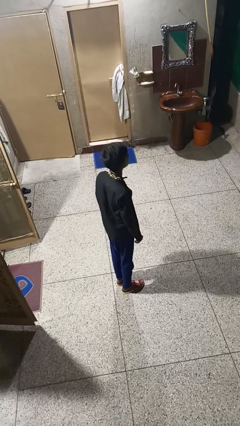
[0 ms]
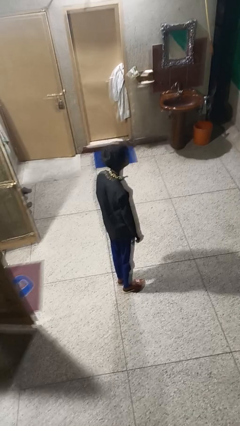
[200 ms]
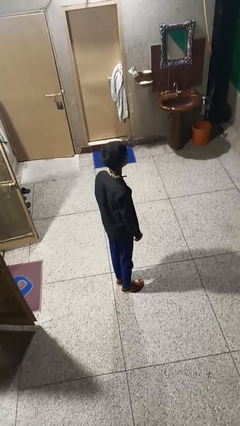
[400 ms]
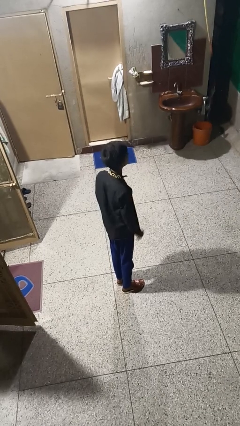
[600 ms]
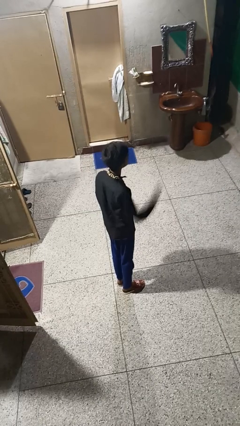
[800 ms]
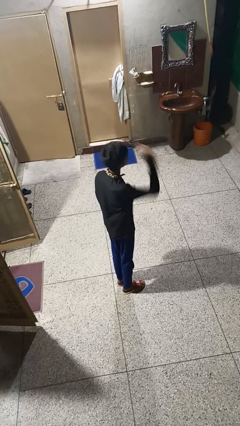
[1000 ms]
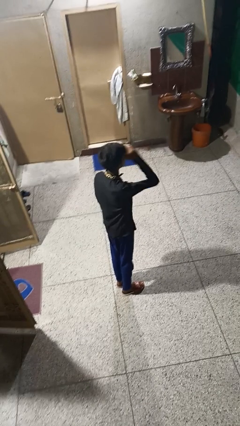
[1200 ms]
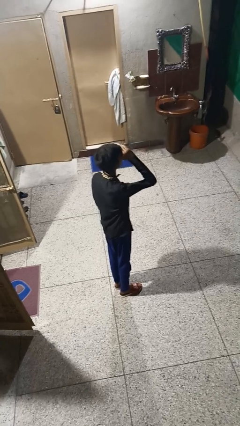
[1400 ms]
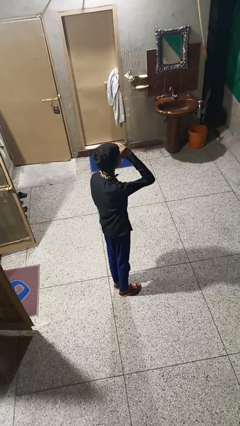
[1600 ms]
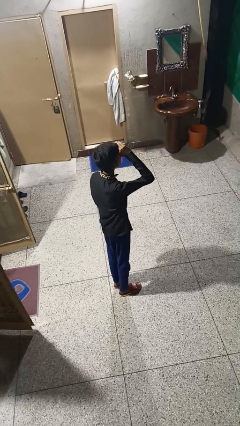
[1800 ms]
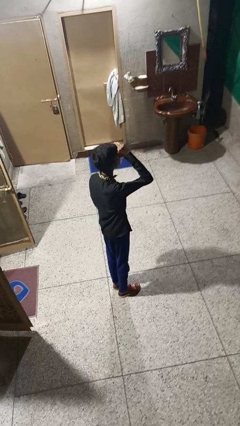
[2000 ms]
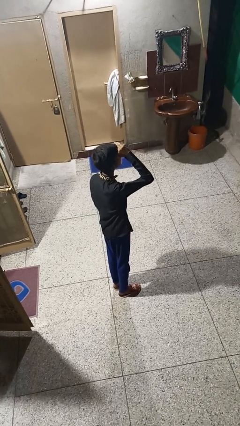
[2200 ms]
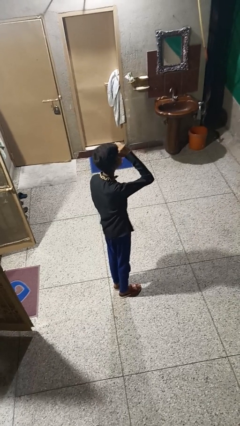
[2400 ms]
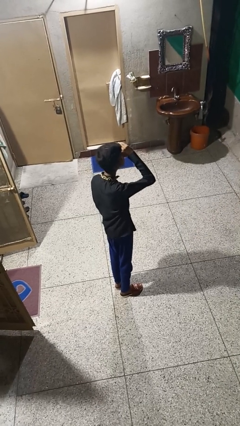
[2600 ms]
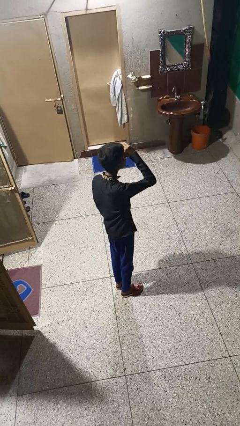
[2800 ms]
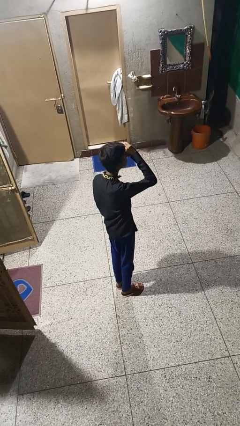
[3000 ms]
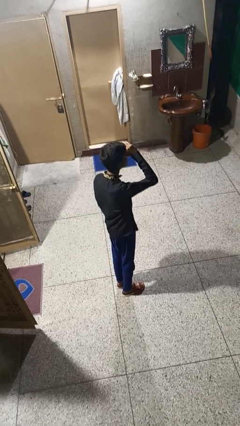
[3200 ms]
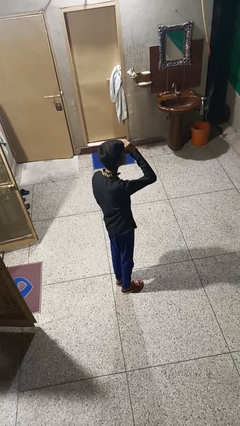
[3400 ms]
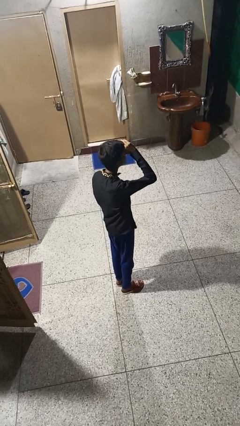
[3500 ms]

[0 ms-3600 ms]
person shades eyes

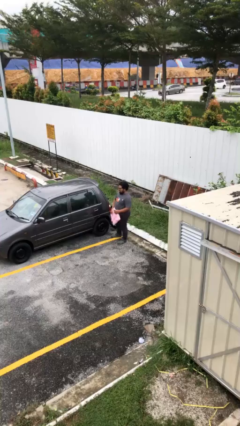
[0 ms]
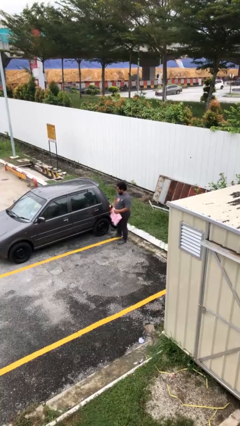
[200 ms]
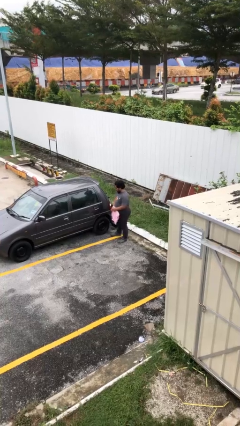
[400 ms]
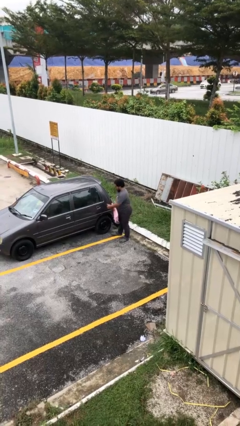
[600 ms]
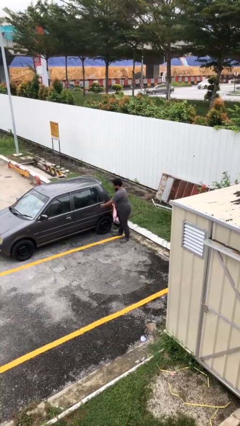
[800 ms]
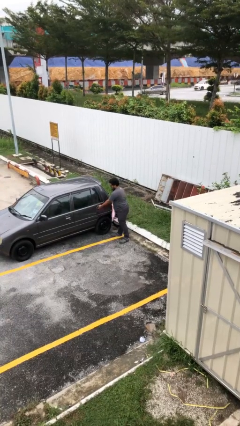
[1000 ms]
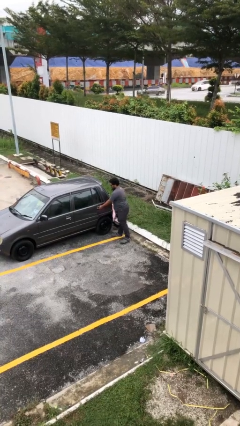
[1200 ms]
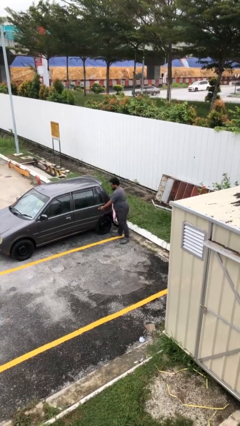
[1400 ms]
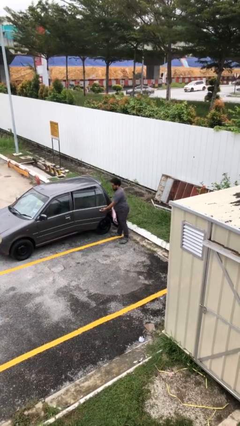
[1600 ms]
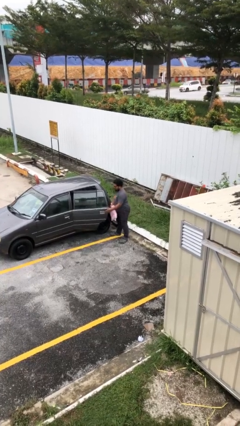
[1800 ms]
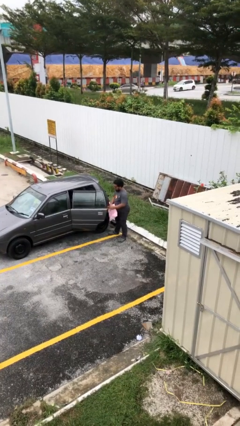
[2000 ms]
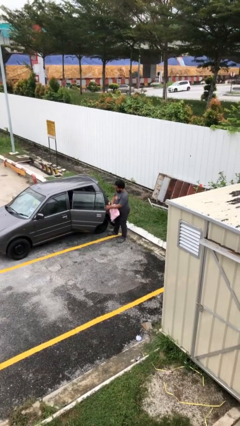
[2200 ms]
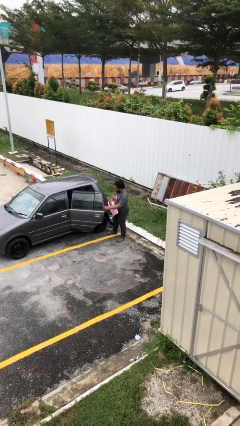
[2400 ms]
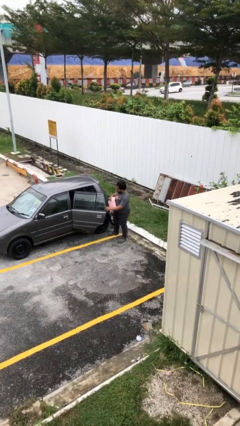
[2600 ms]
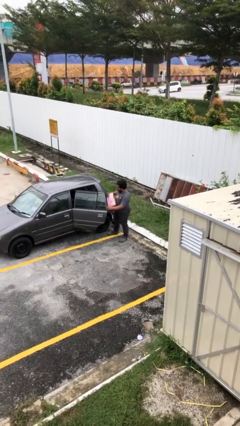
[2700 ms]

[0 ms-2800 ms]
person opens car door

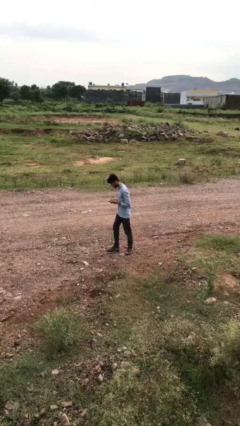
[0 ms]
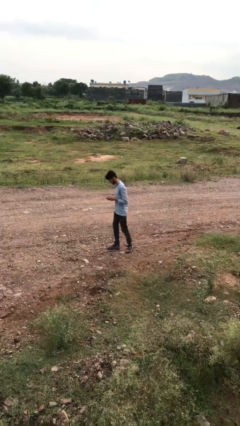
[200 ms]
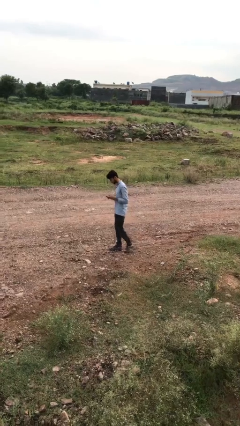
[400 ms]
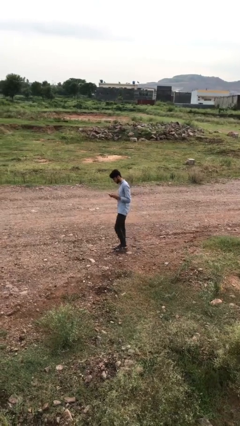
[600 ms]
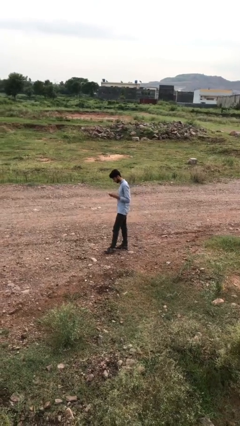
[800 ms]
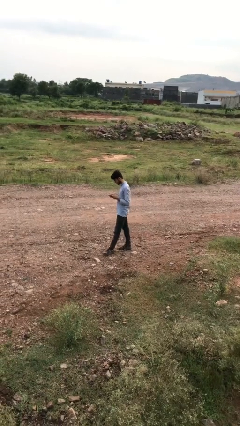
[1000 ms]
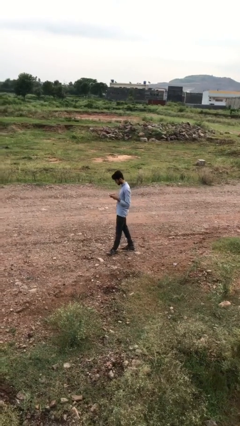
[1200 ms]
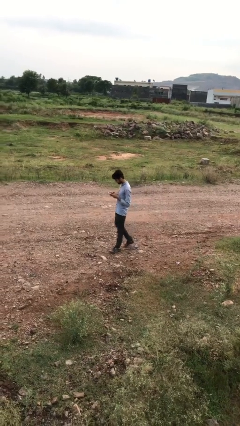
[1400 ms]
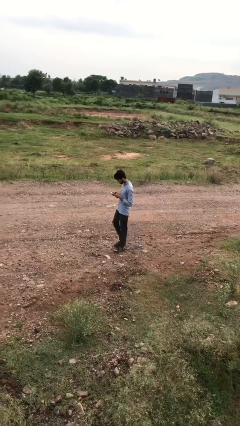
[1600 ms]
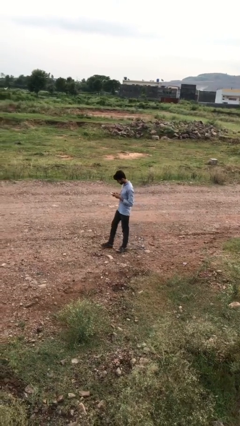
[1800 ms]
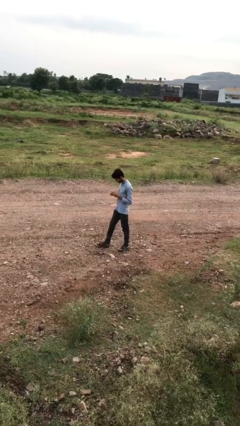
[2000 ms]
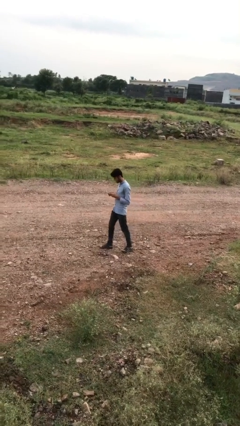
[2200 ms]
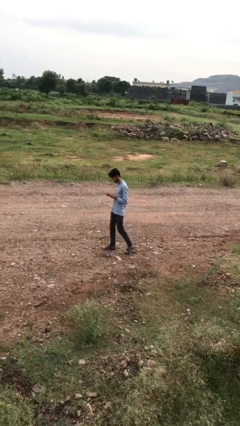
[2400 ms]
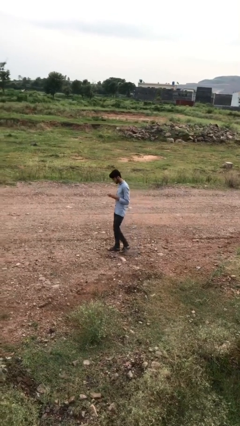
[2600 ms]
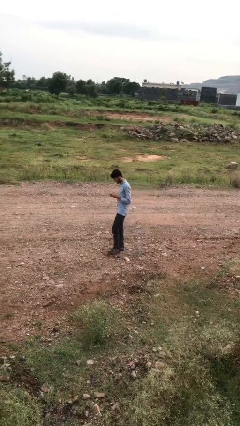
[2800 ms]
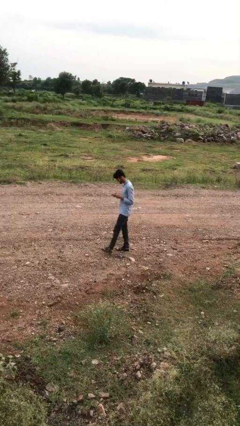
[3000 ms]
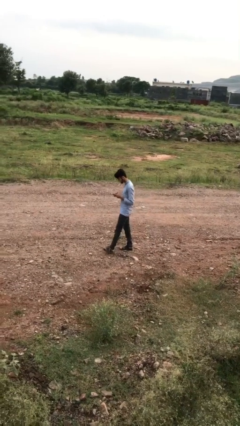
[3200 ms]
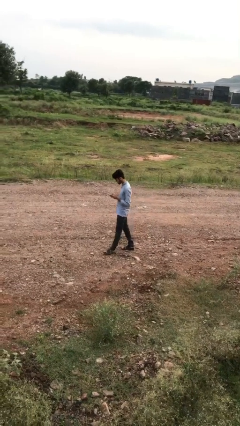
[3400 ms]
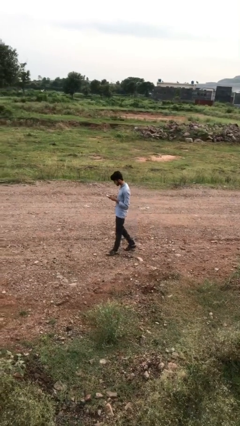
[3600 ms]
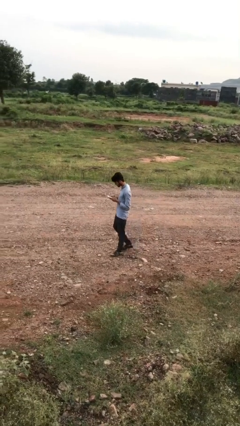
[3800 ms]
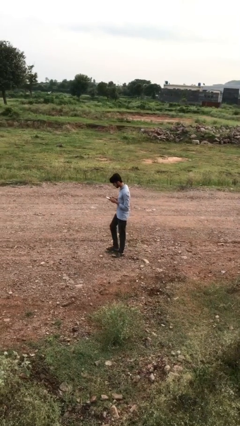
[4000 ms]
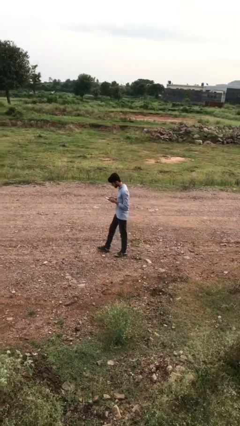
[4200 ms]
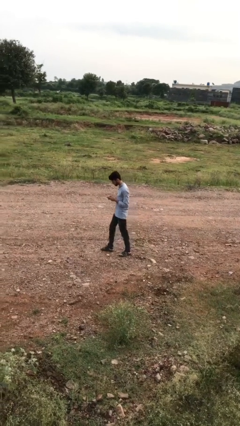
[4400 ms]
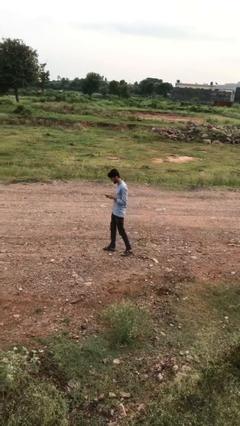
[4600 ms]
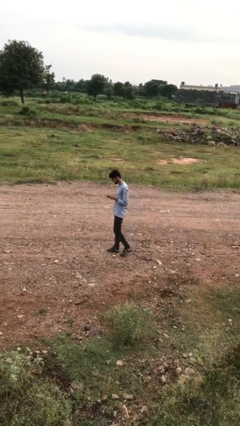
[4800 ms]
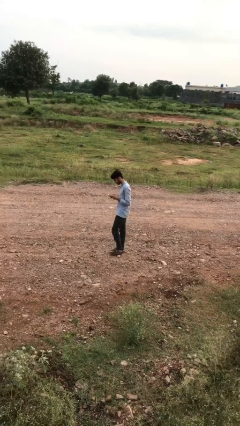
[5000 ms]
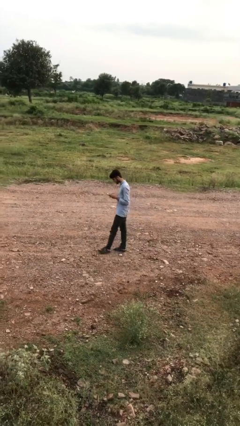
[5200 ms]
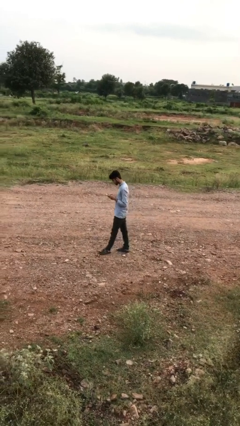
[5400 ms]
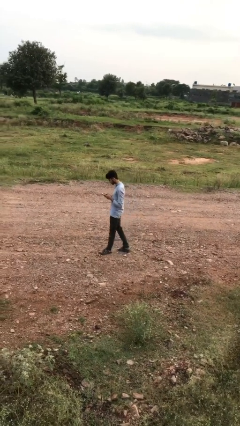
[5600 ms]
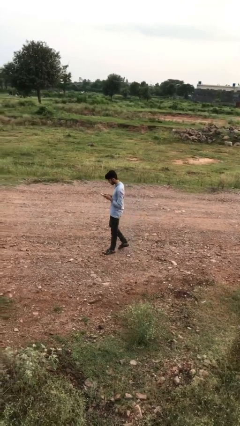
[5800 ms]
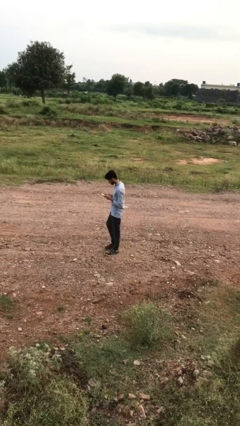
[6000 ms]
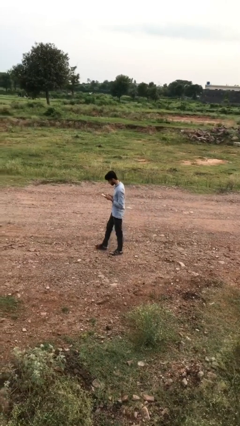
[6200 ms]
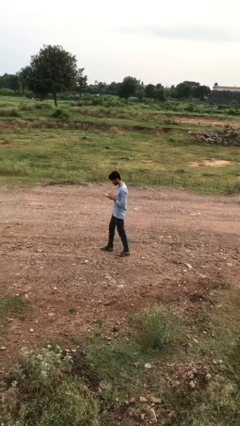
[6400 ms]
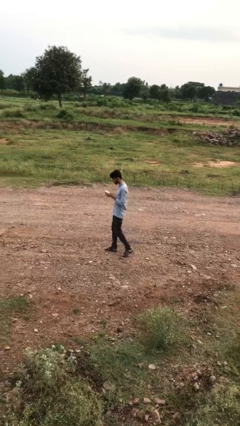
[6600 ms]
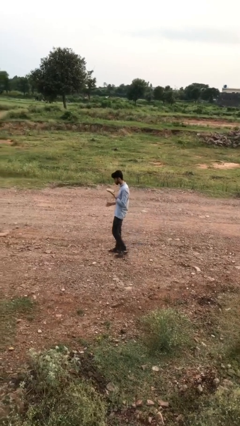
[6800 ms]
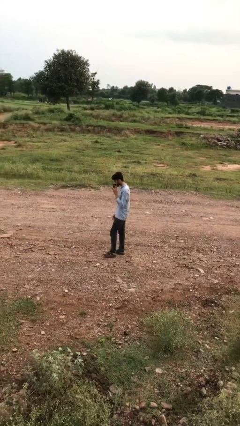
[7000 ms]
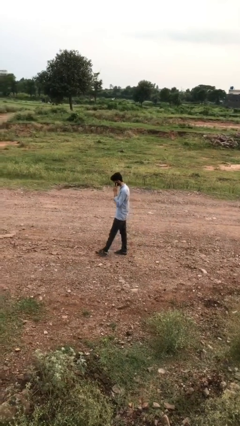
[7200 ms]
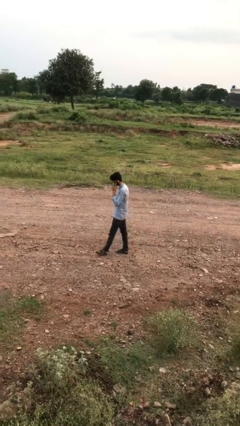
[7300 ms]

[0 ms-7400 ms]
person texts on phone

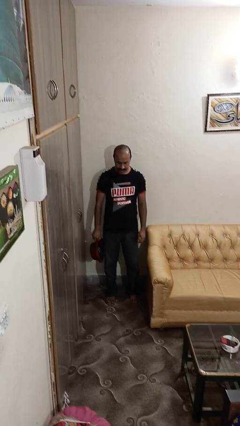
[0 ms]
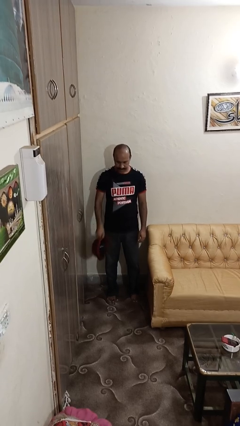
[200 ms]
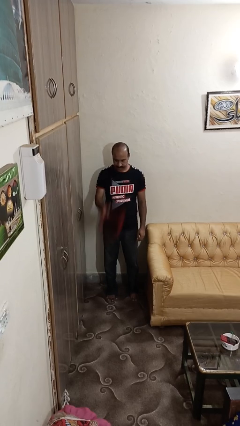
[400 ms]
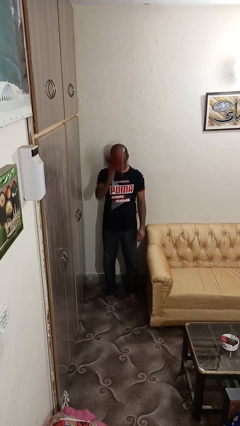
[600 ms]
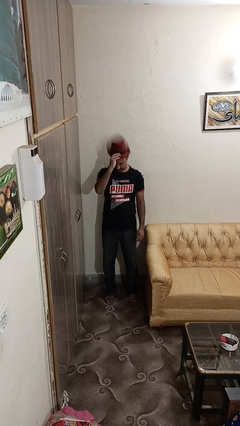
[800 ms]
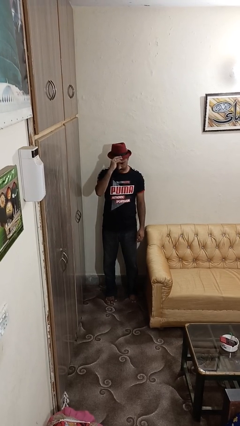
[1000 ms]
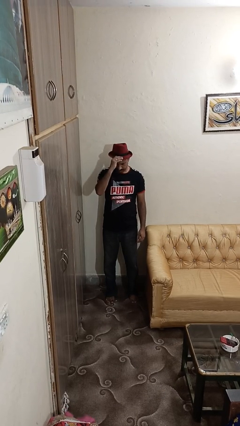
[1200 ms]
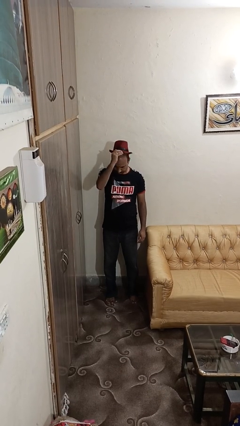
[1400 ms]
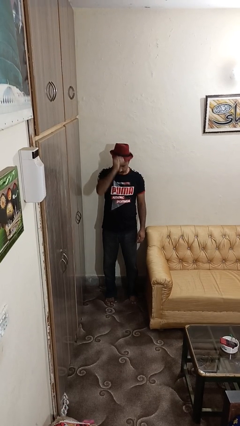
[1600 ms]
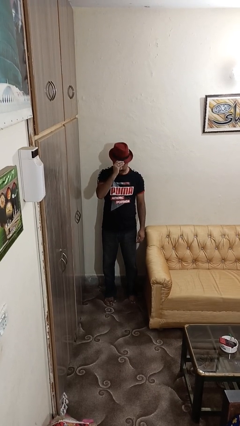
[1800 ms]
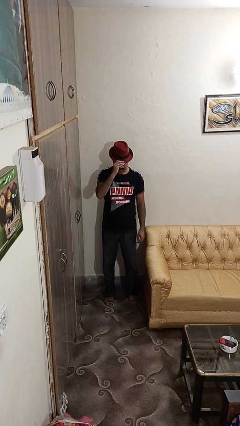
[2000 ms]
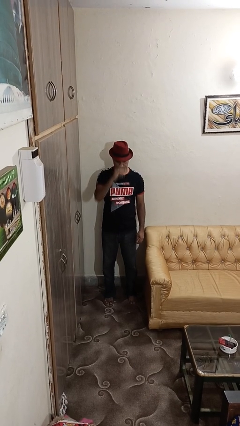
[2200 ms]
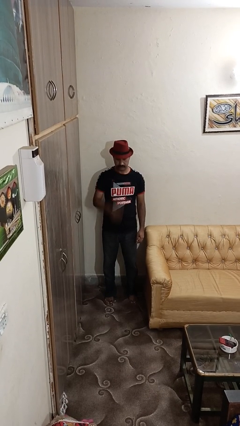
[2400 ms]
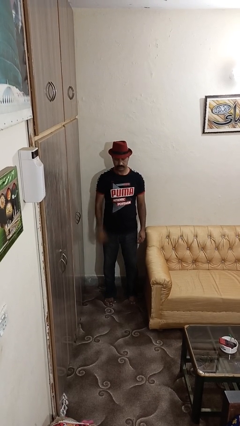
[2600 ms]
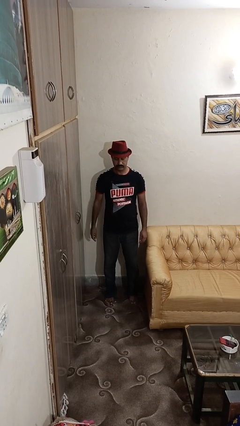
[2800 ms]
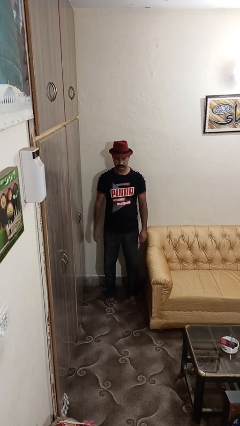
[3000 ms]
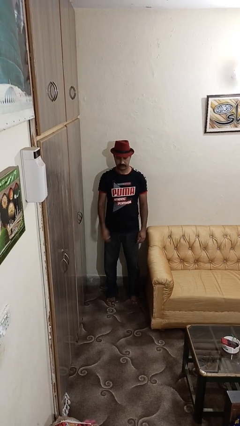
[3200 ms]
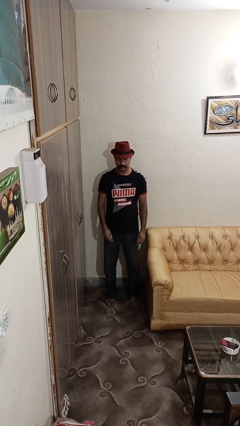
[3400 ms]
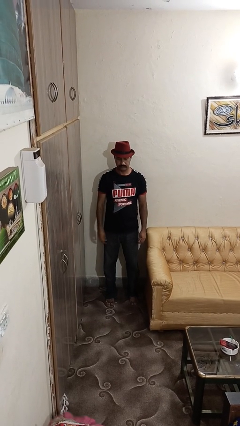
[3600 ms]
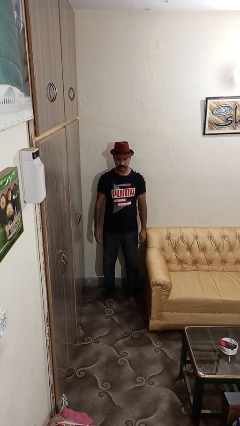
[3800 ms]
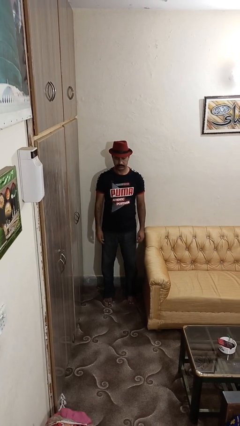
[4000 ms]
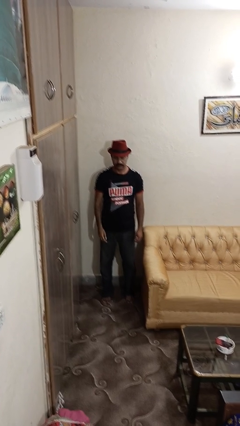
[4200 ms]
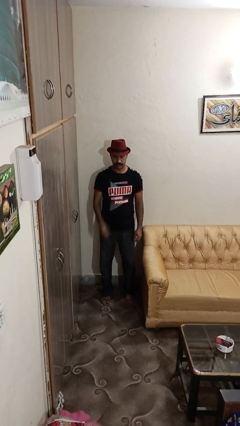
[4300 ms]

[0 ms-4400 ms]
person puts on hat
